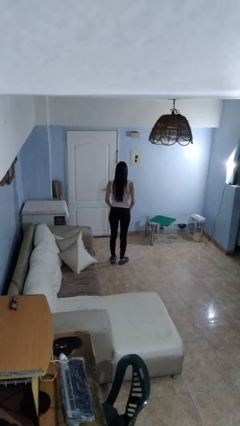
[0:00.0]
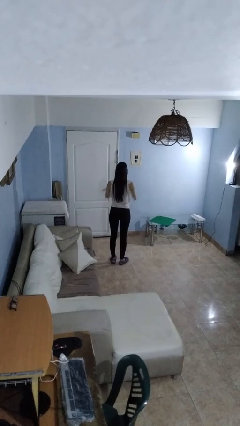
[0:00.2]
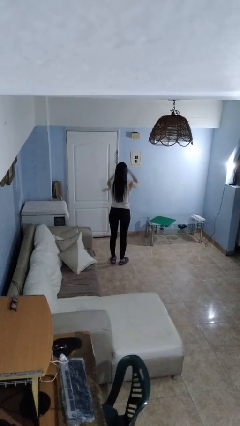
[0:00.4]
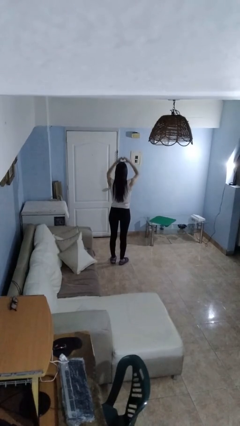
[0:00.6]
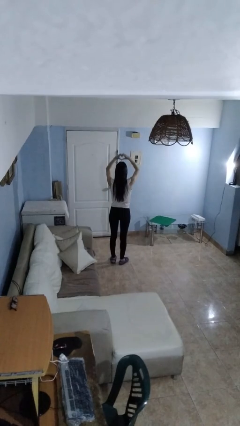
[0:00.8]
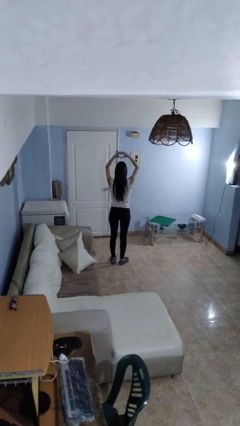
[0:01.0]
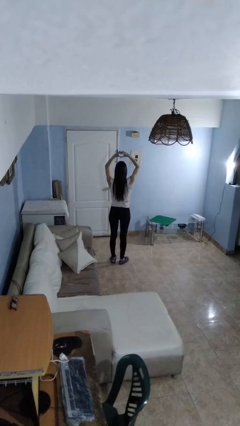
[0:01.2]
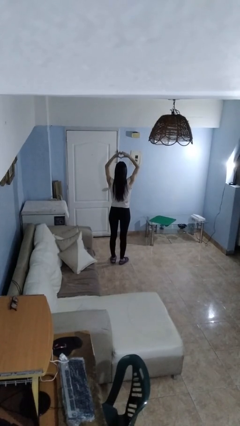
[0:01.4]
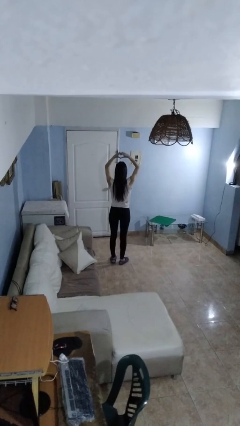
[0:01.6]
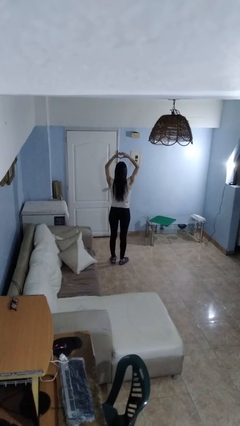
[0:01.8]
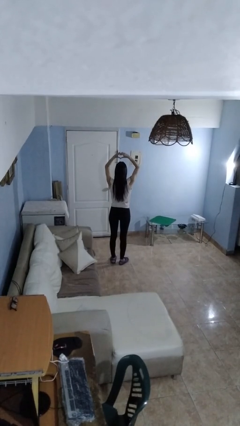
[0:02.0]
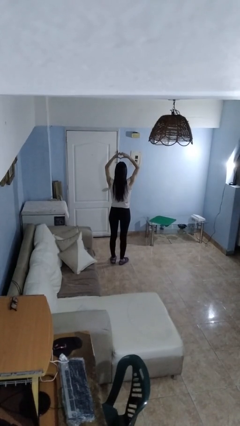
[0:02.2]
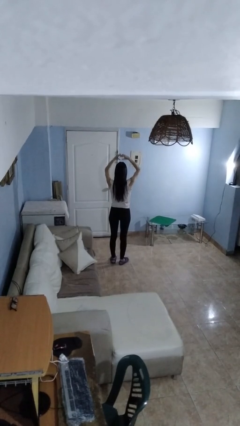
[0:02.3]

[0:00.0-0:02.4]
person gestures heart

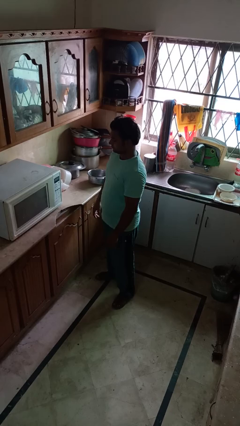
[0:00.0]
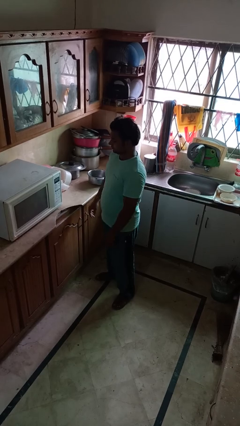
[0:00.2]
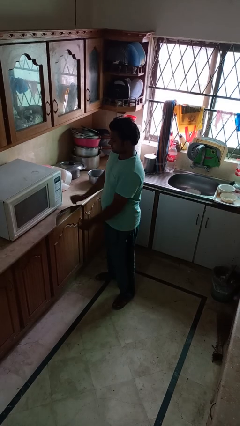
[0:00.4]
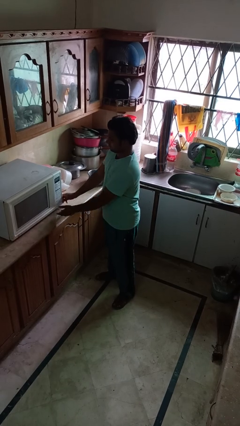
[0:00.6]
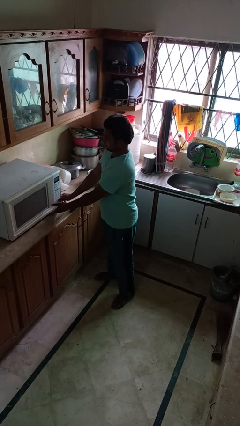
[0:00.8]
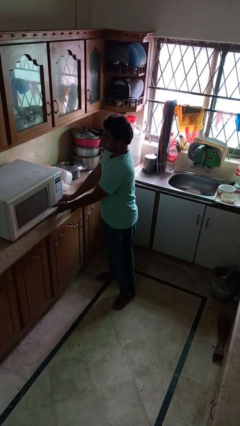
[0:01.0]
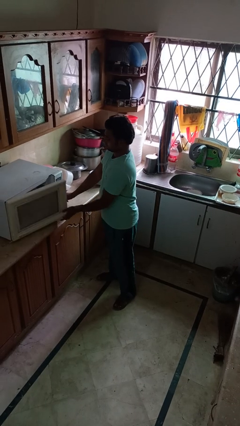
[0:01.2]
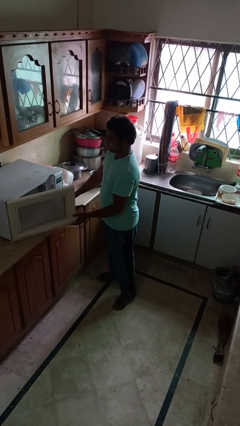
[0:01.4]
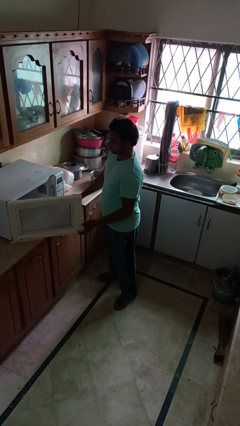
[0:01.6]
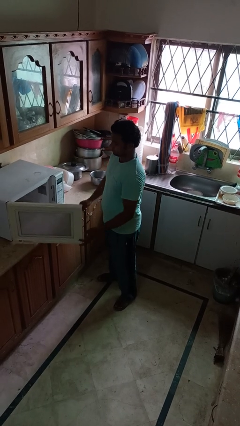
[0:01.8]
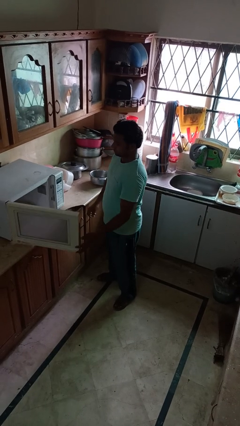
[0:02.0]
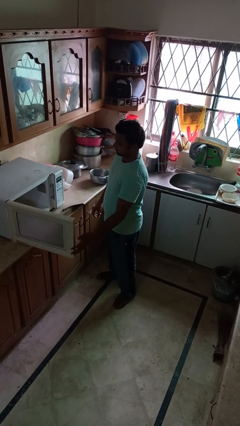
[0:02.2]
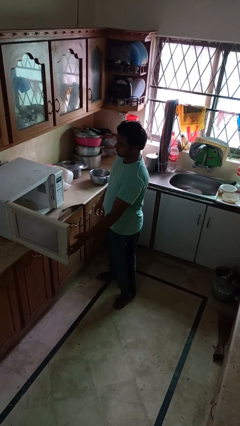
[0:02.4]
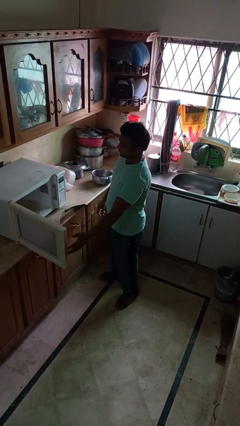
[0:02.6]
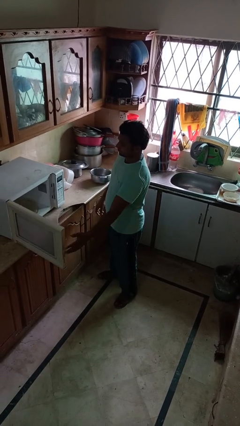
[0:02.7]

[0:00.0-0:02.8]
person opens microwave

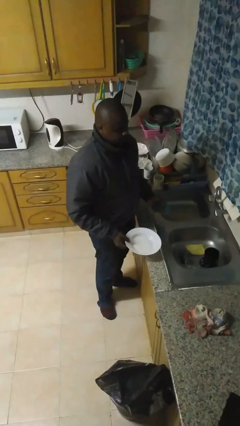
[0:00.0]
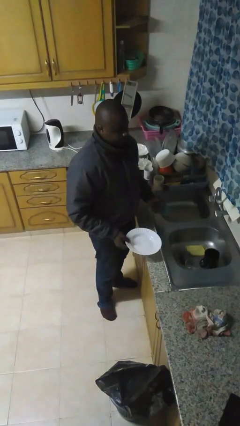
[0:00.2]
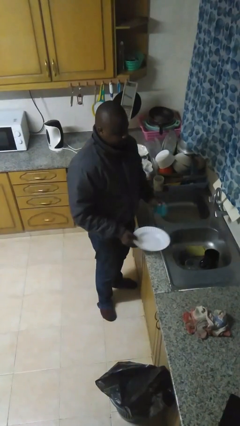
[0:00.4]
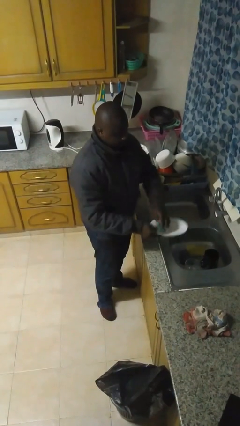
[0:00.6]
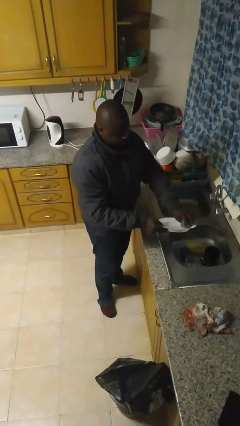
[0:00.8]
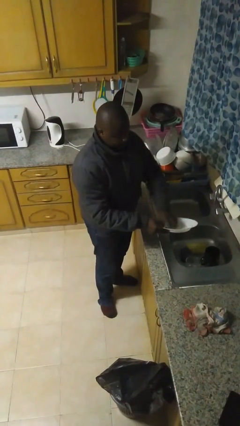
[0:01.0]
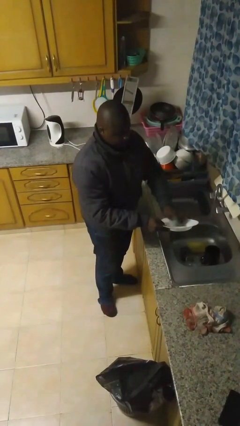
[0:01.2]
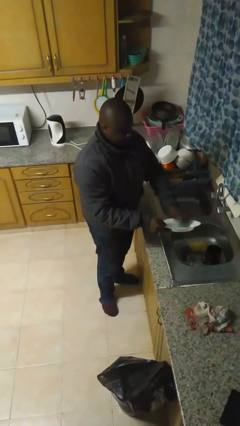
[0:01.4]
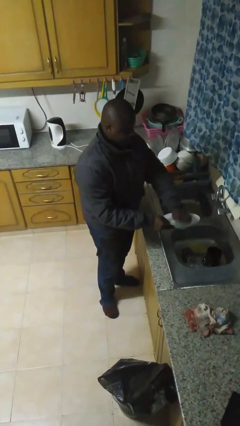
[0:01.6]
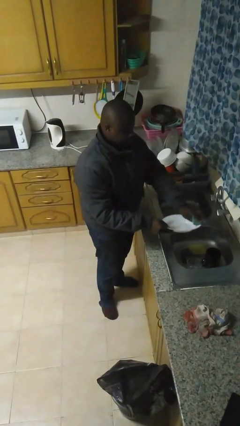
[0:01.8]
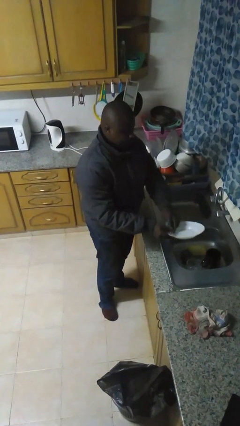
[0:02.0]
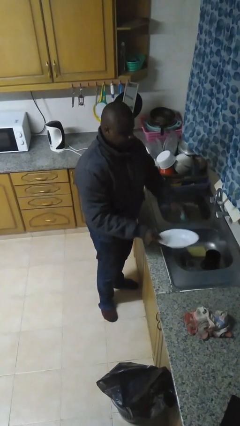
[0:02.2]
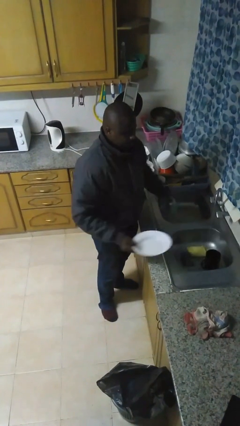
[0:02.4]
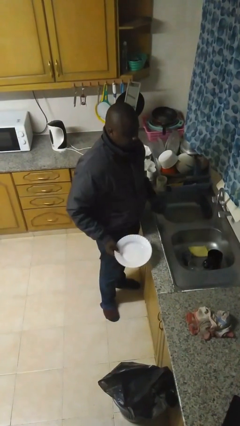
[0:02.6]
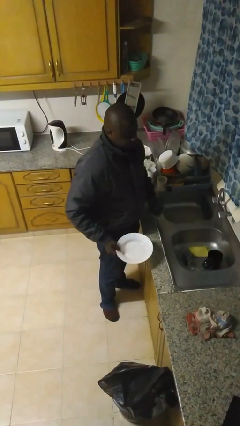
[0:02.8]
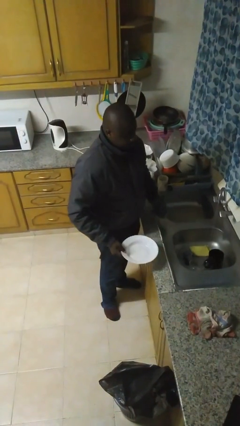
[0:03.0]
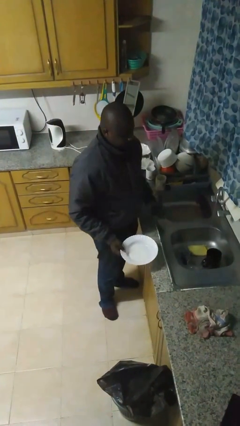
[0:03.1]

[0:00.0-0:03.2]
person washes dish

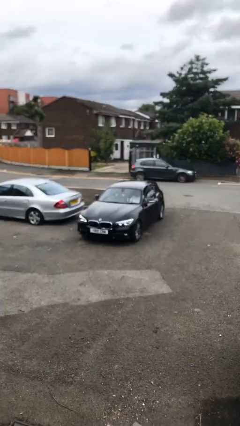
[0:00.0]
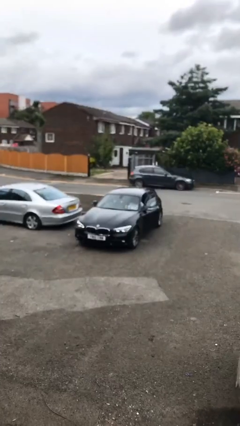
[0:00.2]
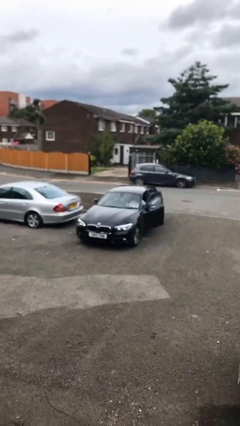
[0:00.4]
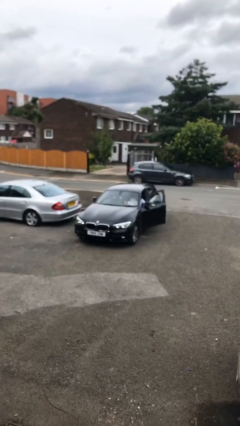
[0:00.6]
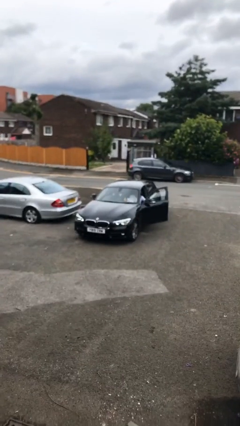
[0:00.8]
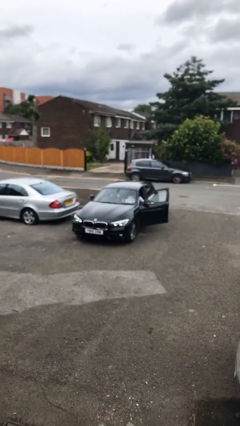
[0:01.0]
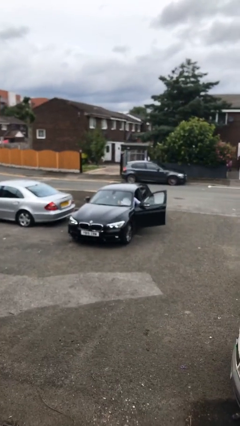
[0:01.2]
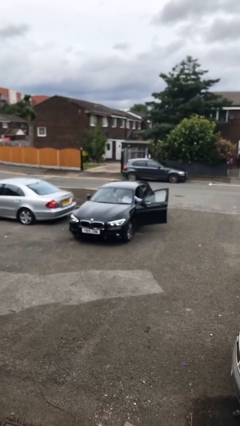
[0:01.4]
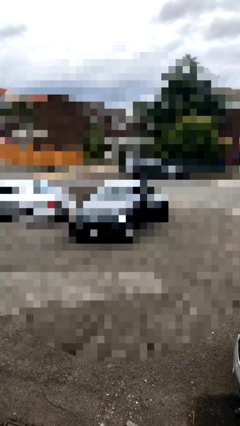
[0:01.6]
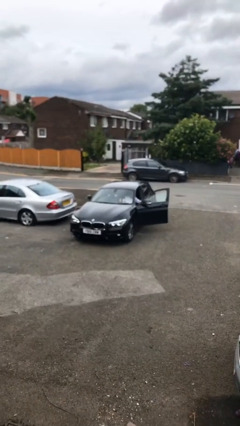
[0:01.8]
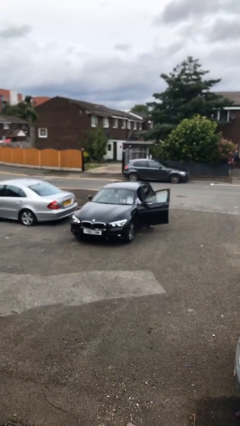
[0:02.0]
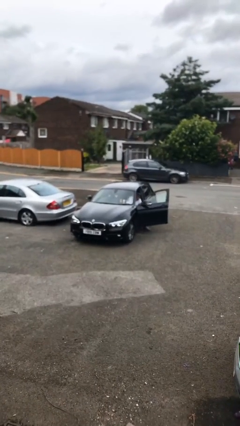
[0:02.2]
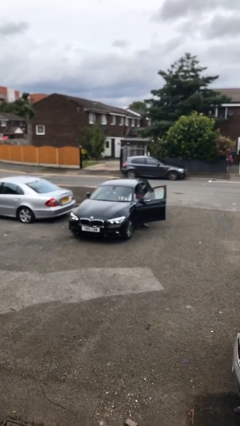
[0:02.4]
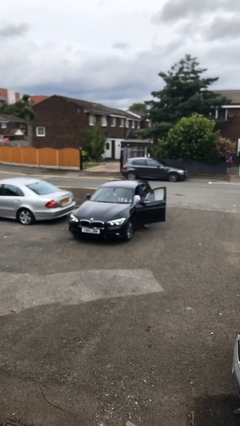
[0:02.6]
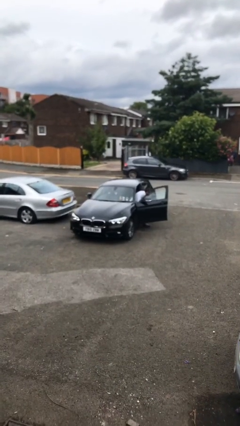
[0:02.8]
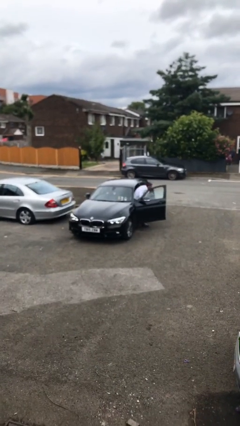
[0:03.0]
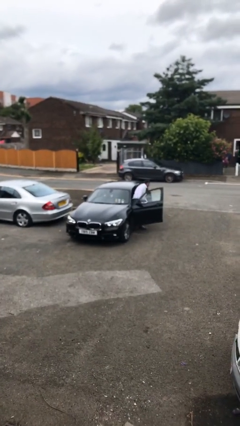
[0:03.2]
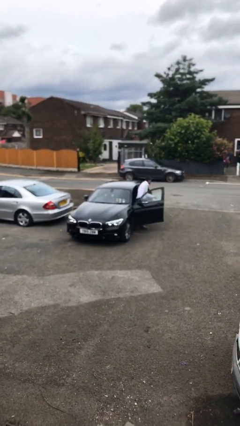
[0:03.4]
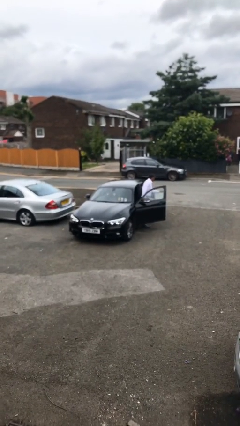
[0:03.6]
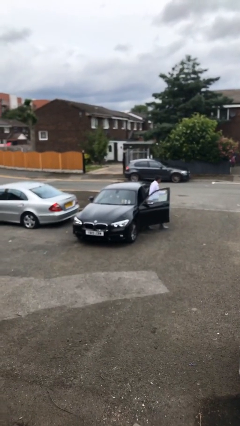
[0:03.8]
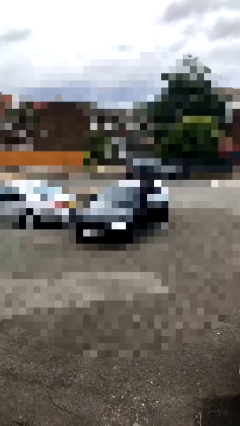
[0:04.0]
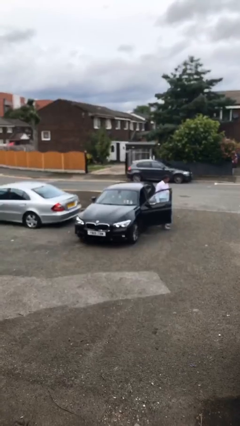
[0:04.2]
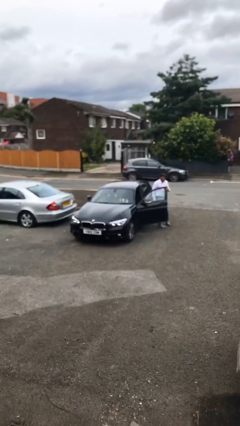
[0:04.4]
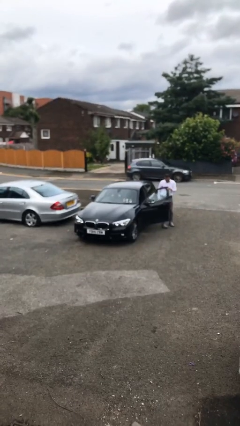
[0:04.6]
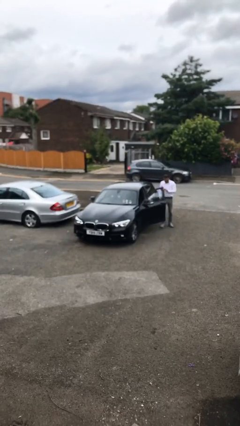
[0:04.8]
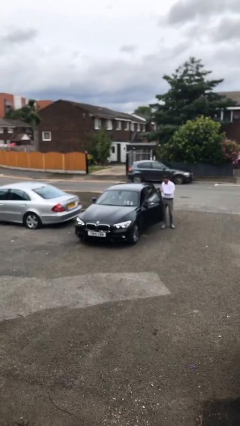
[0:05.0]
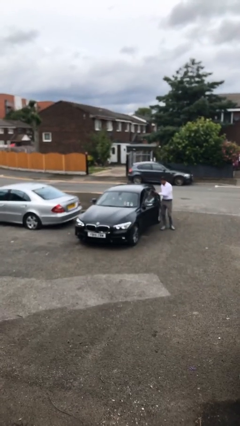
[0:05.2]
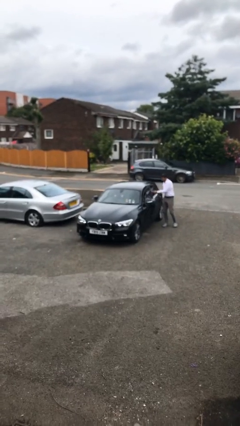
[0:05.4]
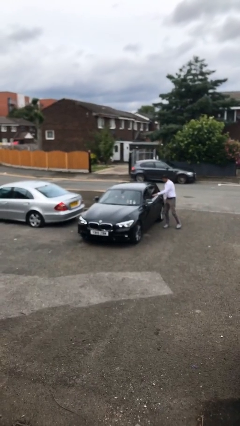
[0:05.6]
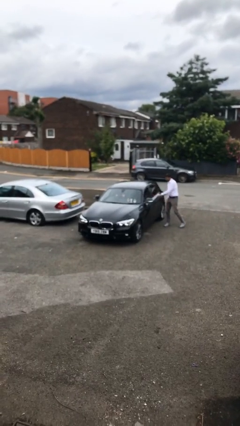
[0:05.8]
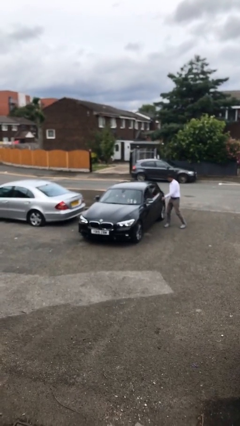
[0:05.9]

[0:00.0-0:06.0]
car drops off person

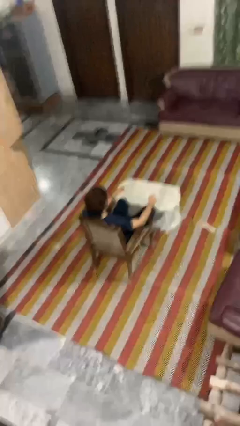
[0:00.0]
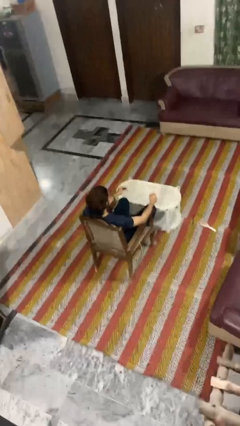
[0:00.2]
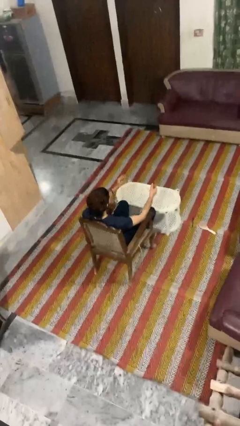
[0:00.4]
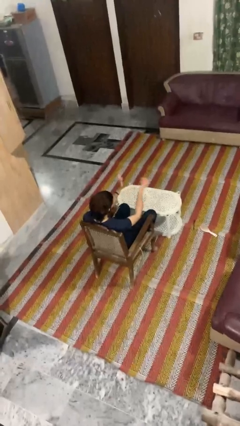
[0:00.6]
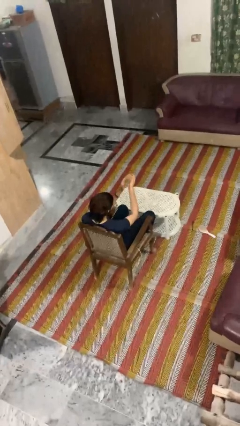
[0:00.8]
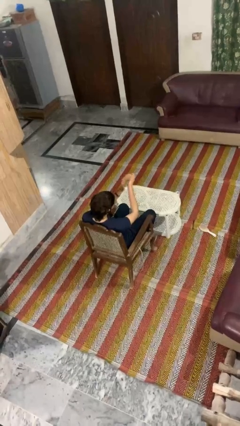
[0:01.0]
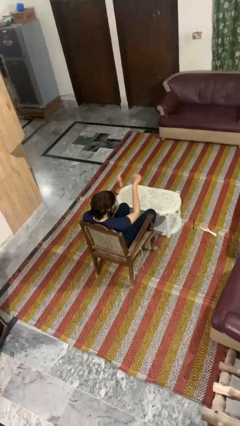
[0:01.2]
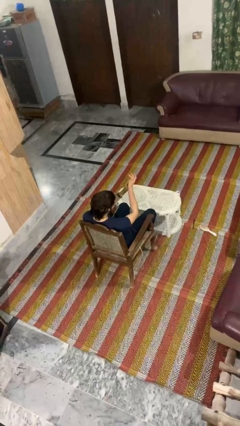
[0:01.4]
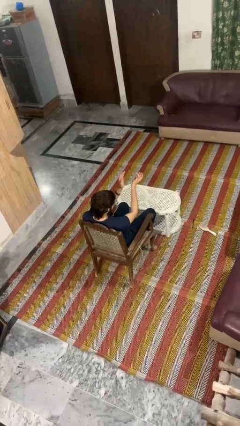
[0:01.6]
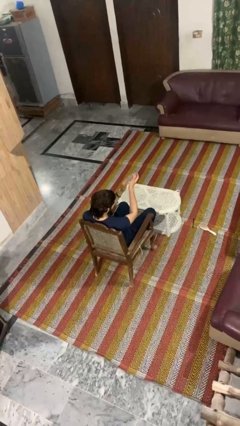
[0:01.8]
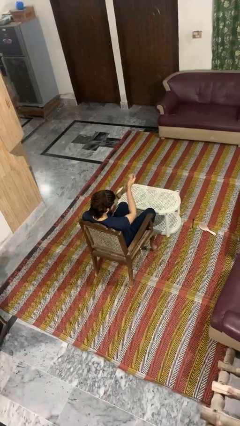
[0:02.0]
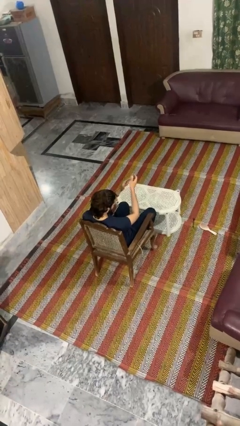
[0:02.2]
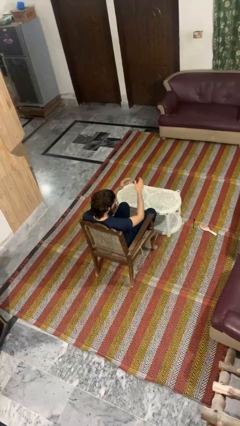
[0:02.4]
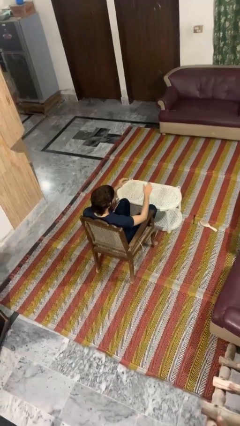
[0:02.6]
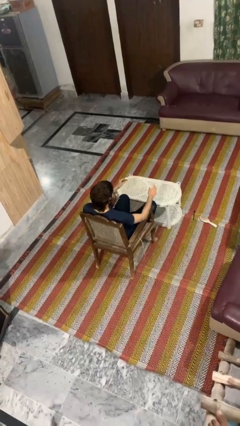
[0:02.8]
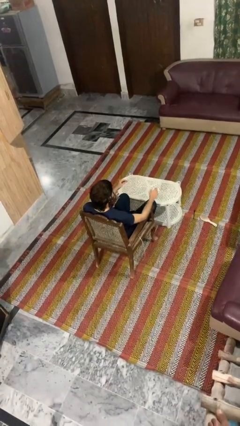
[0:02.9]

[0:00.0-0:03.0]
person claps hands

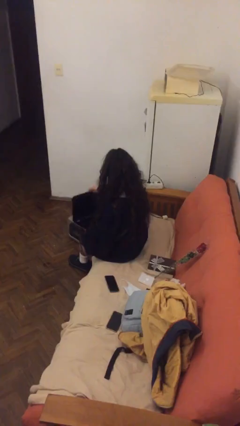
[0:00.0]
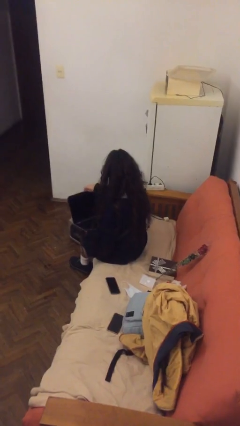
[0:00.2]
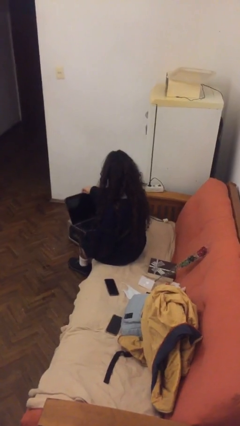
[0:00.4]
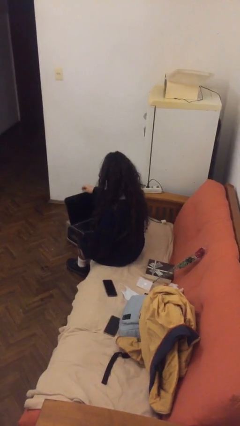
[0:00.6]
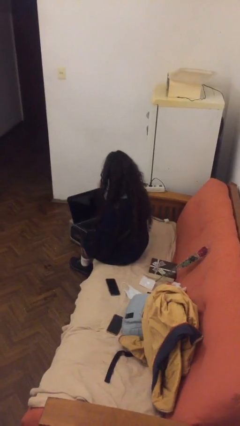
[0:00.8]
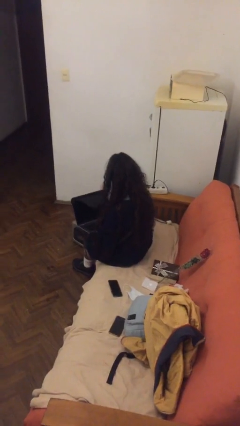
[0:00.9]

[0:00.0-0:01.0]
person opens laptop
